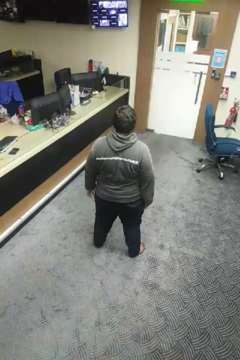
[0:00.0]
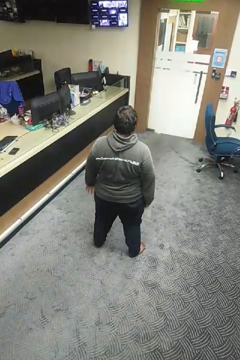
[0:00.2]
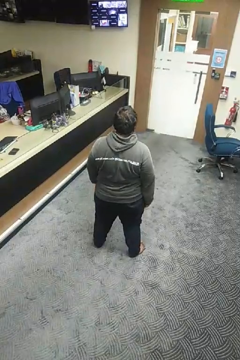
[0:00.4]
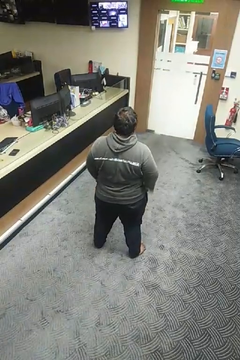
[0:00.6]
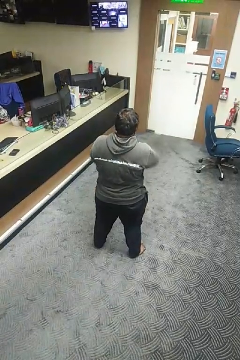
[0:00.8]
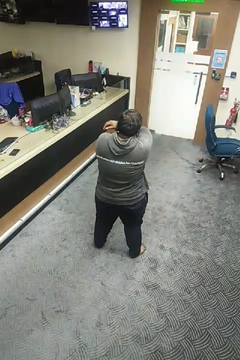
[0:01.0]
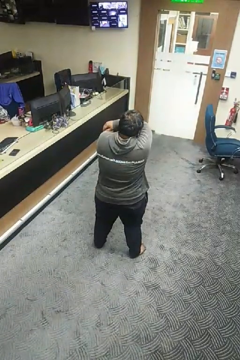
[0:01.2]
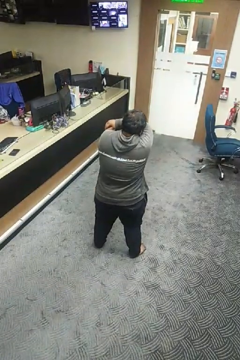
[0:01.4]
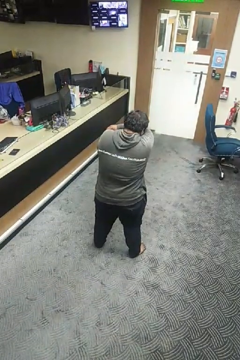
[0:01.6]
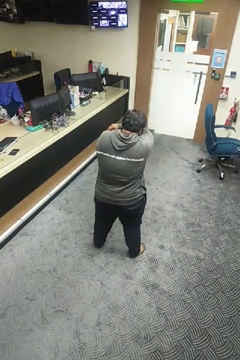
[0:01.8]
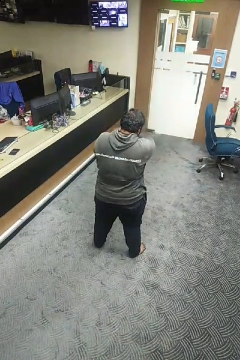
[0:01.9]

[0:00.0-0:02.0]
person sneezes into arm

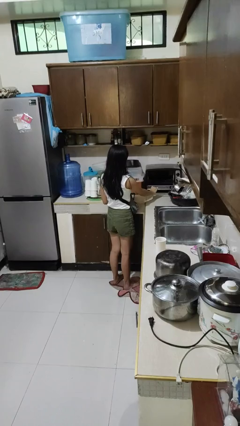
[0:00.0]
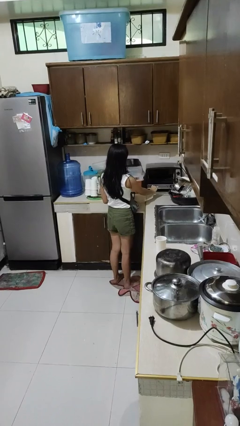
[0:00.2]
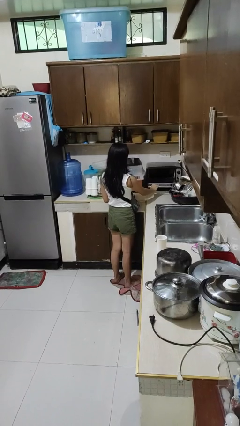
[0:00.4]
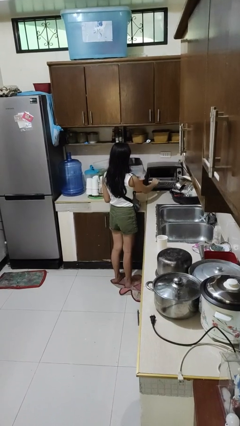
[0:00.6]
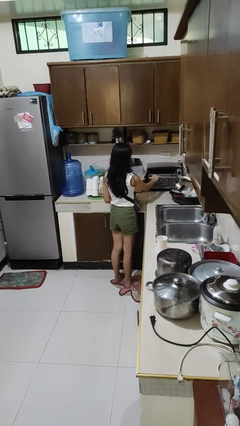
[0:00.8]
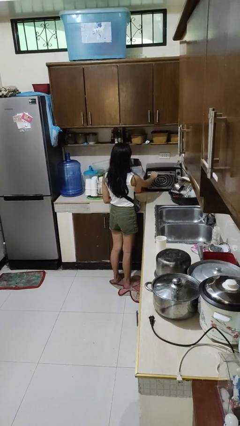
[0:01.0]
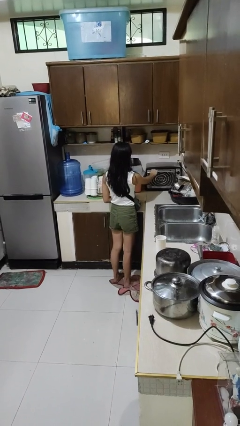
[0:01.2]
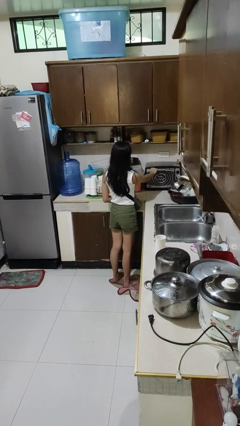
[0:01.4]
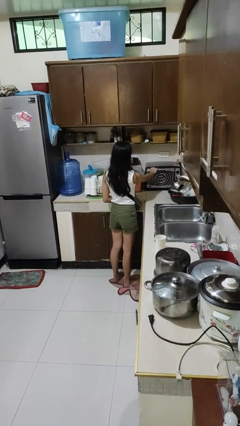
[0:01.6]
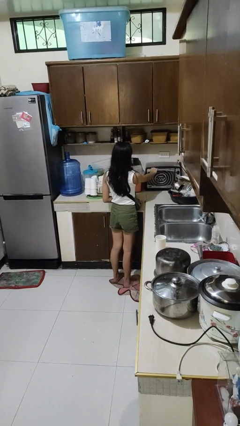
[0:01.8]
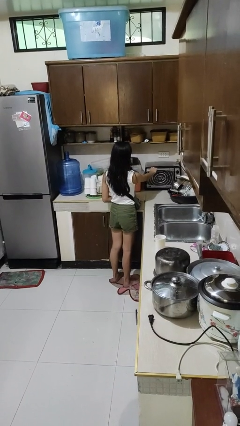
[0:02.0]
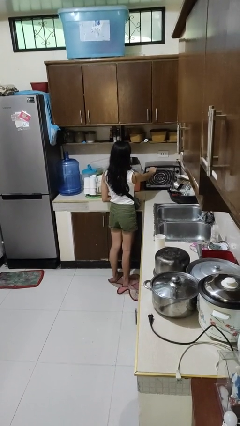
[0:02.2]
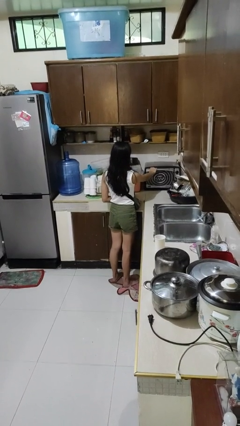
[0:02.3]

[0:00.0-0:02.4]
person closes microwave

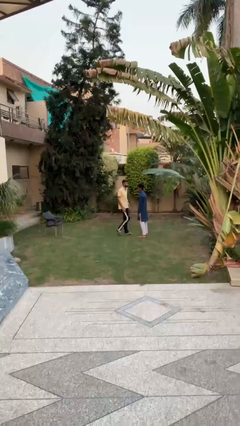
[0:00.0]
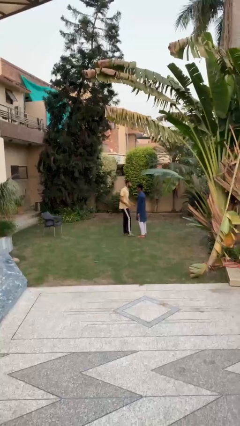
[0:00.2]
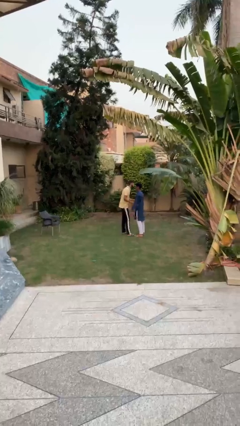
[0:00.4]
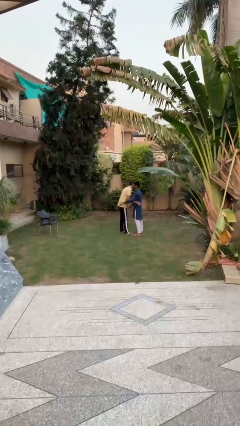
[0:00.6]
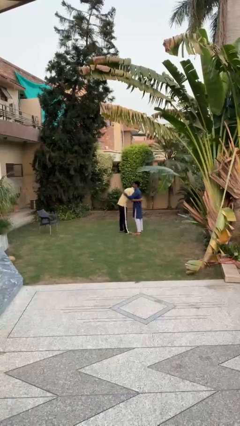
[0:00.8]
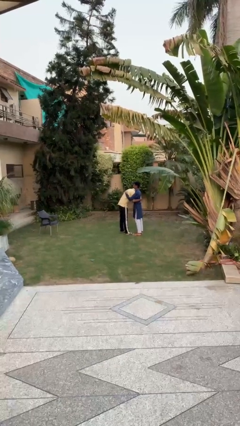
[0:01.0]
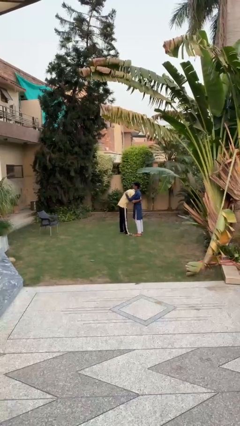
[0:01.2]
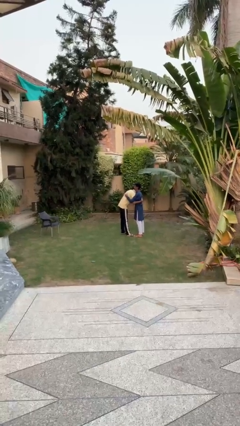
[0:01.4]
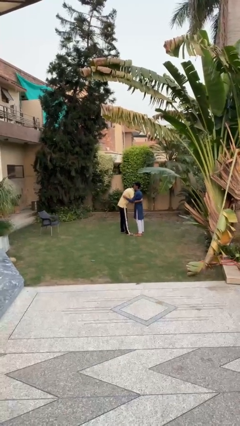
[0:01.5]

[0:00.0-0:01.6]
person embraces person

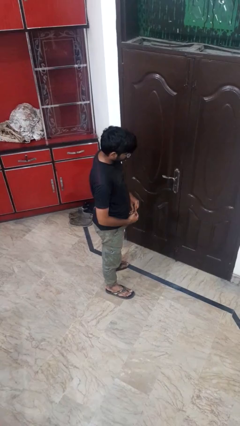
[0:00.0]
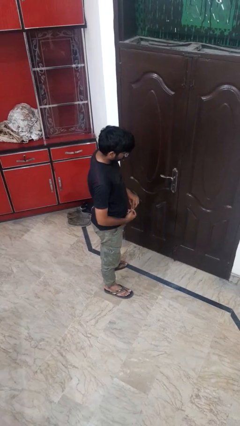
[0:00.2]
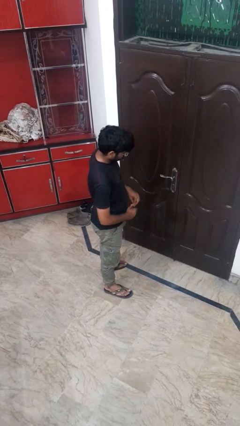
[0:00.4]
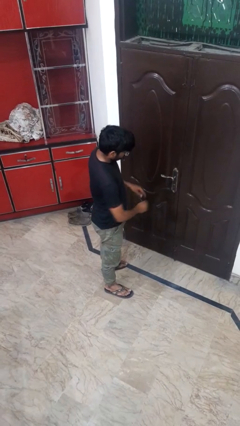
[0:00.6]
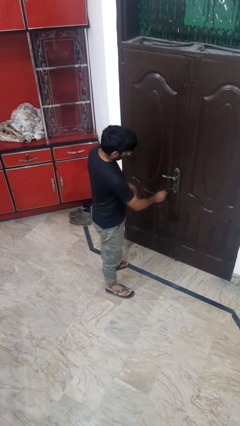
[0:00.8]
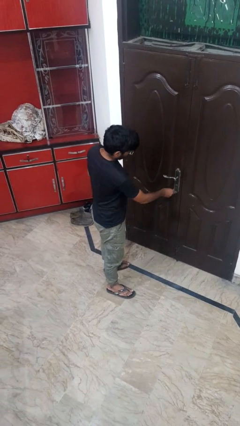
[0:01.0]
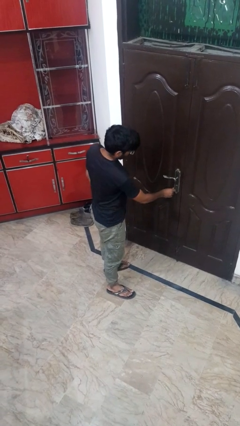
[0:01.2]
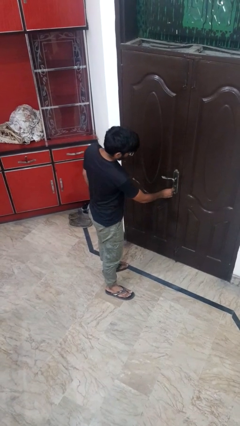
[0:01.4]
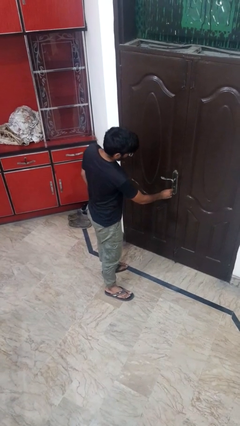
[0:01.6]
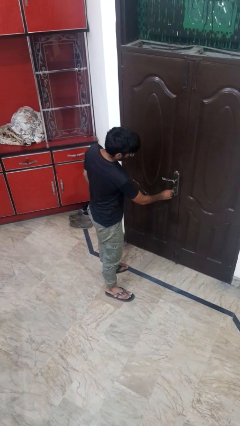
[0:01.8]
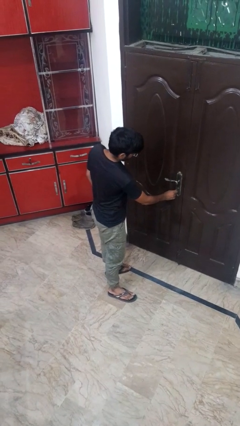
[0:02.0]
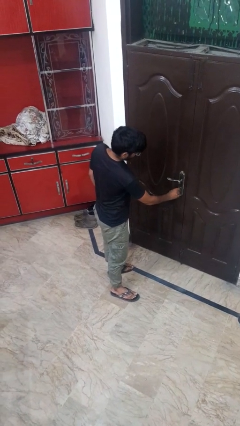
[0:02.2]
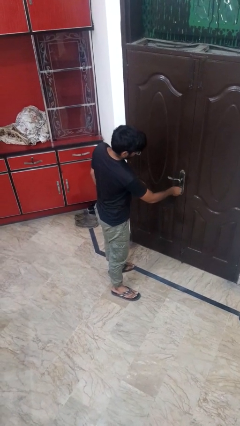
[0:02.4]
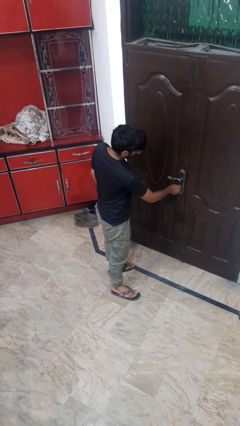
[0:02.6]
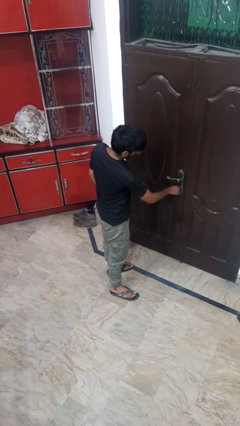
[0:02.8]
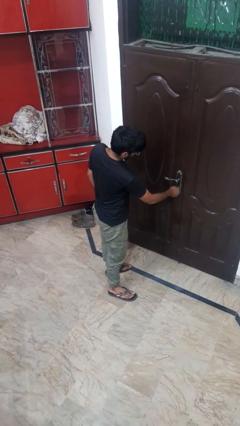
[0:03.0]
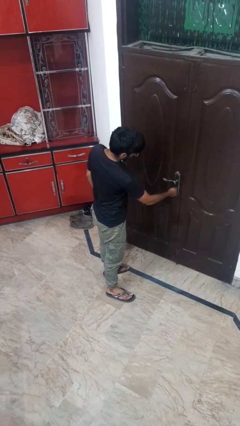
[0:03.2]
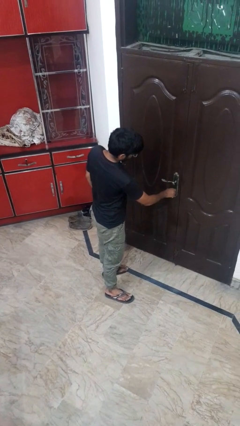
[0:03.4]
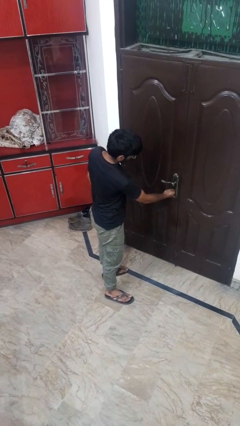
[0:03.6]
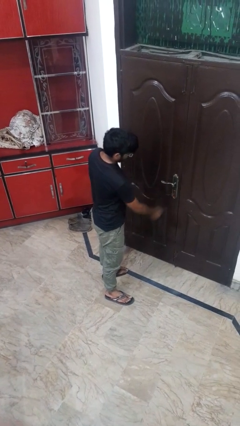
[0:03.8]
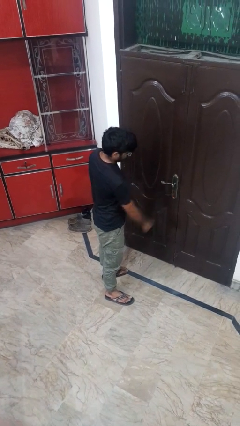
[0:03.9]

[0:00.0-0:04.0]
person locks door with keys

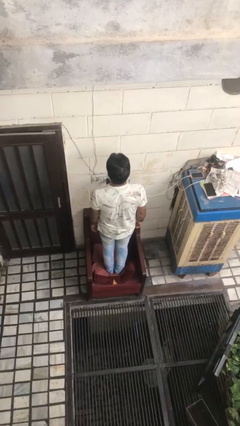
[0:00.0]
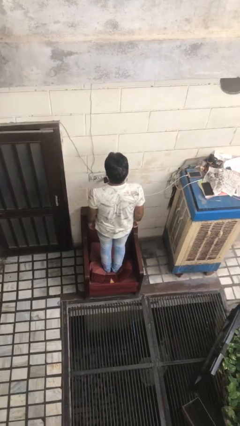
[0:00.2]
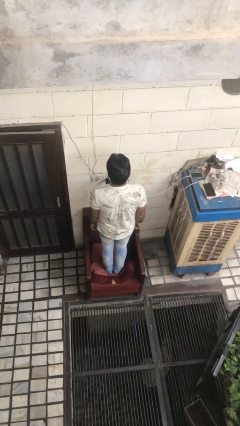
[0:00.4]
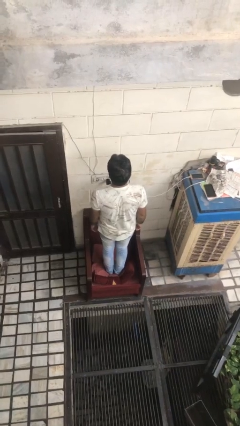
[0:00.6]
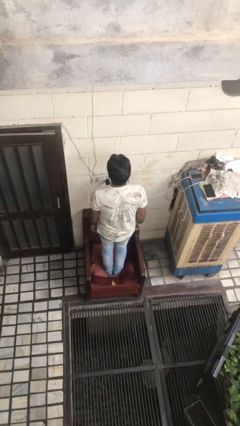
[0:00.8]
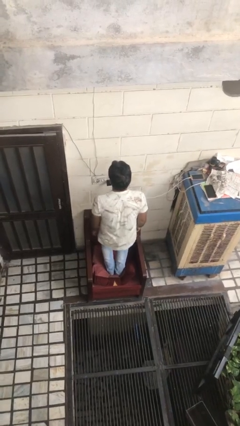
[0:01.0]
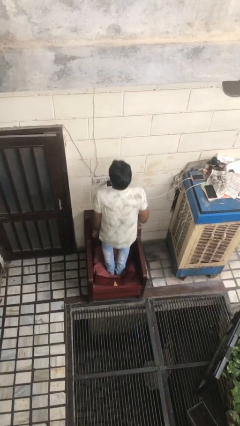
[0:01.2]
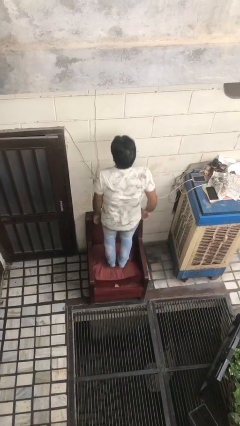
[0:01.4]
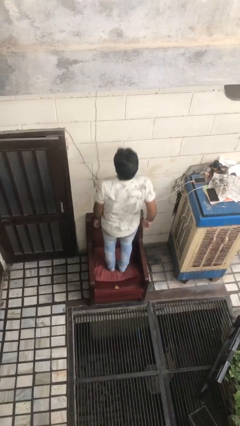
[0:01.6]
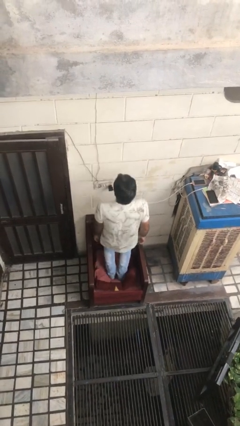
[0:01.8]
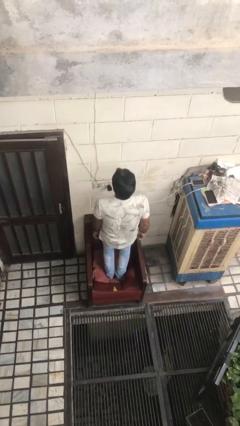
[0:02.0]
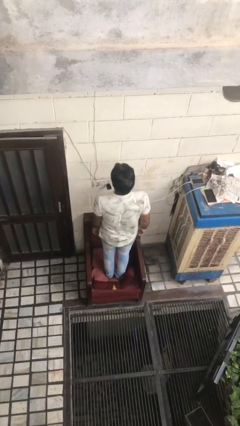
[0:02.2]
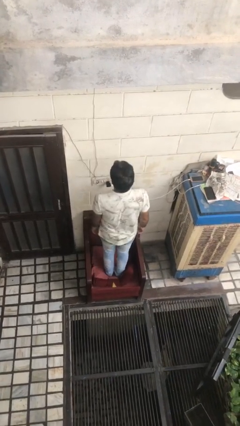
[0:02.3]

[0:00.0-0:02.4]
person jumps on couch

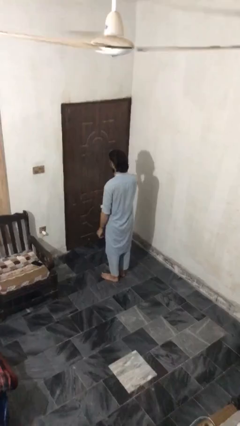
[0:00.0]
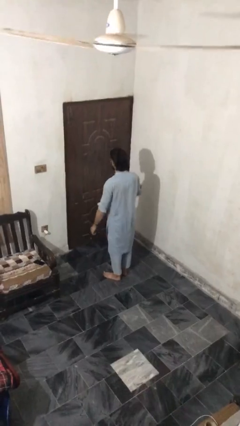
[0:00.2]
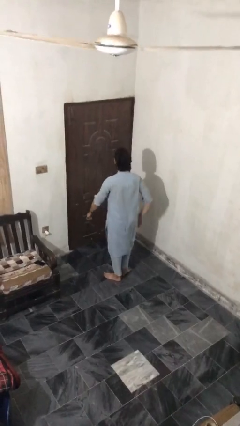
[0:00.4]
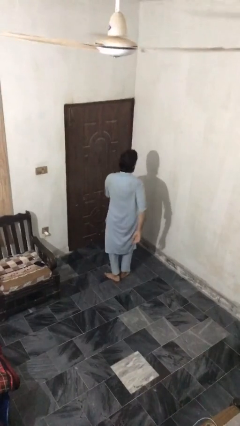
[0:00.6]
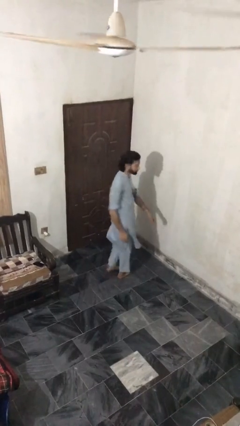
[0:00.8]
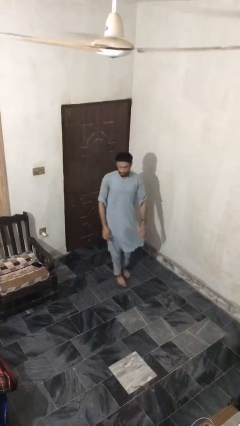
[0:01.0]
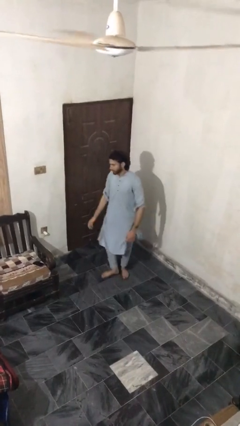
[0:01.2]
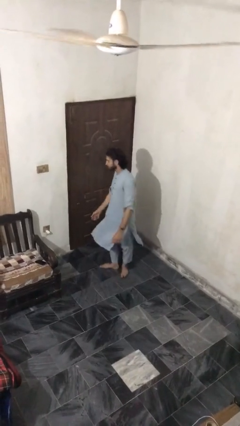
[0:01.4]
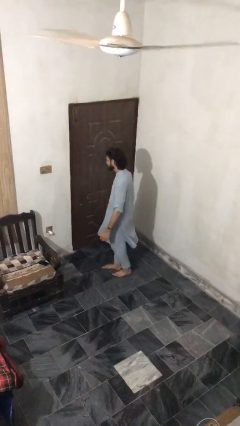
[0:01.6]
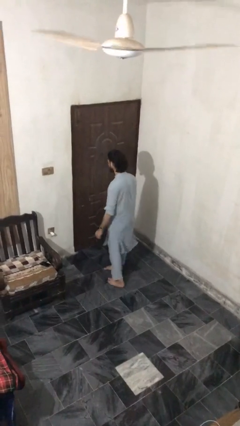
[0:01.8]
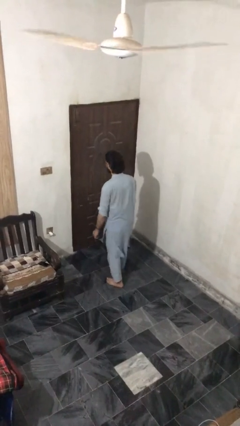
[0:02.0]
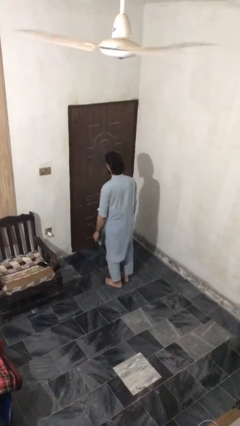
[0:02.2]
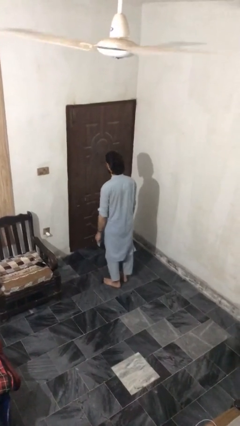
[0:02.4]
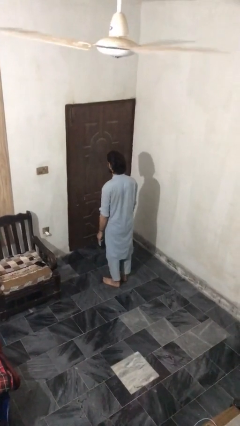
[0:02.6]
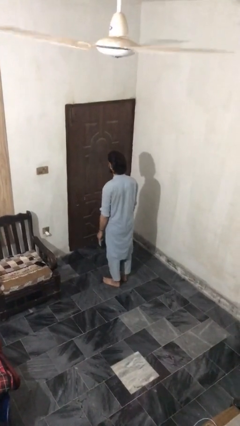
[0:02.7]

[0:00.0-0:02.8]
person twirls

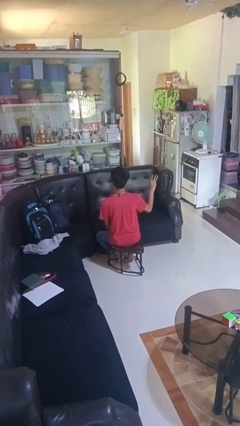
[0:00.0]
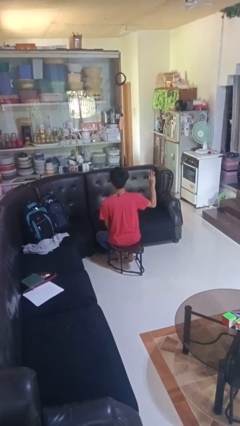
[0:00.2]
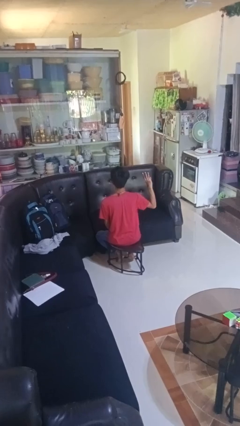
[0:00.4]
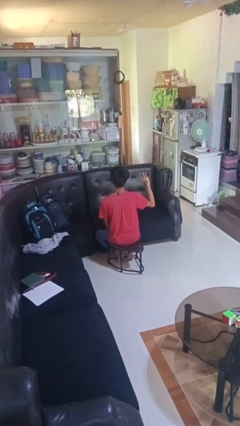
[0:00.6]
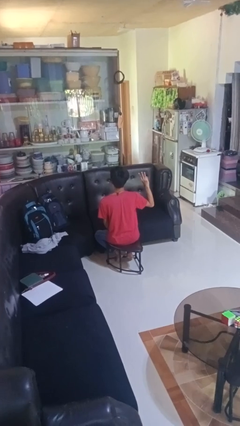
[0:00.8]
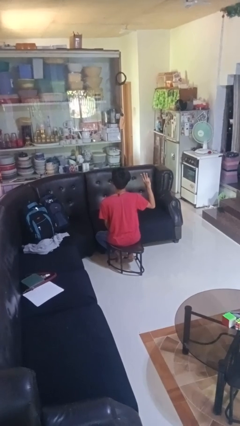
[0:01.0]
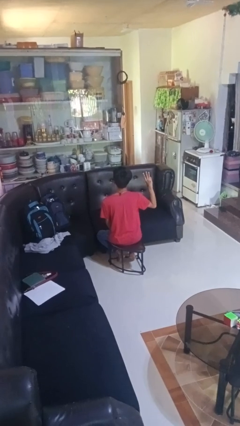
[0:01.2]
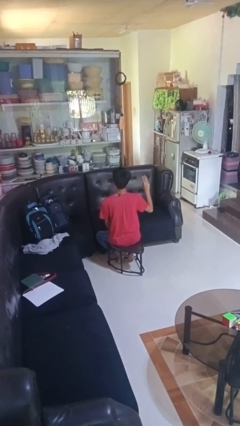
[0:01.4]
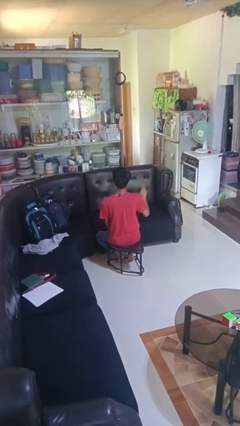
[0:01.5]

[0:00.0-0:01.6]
person gestures number three

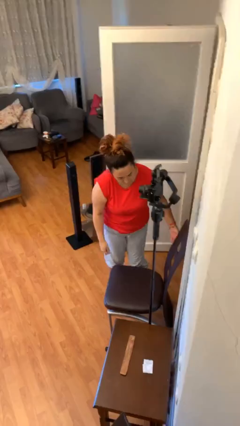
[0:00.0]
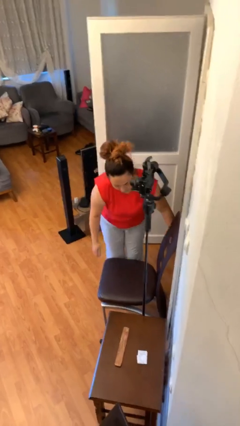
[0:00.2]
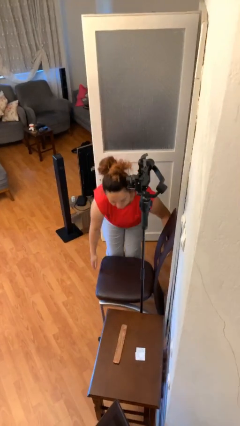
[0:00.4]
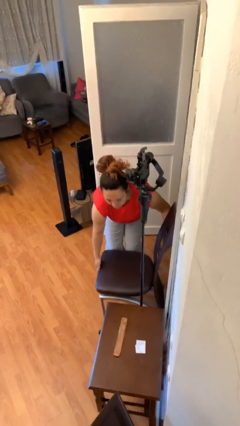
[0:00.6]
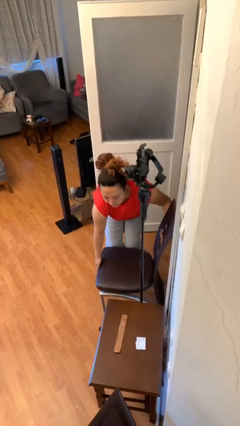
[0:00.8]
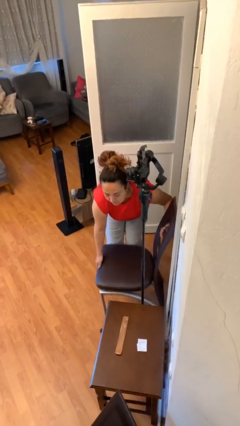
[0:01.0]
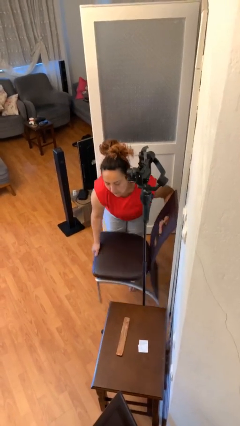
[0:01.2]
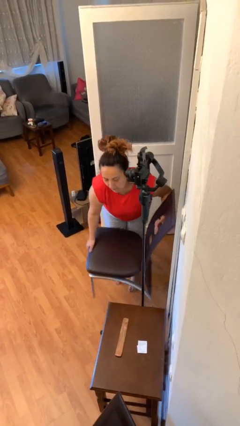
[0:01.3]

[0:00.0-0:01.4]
person picks up object from floor
